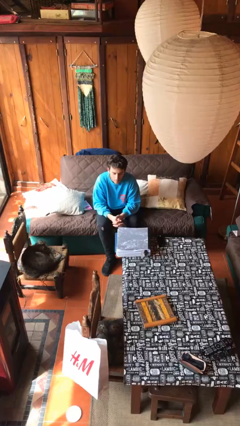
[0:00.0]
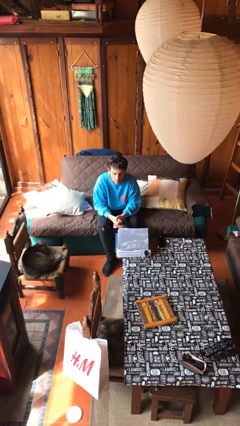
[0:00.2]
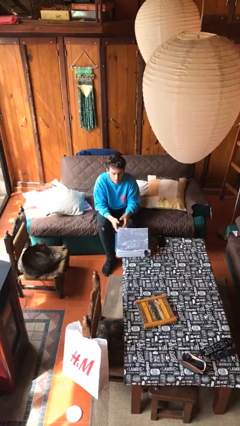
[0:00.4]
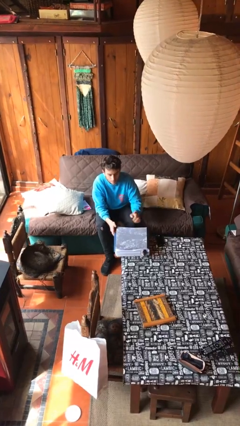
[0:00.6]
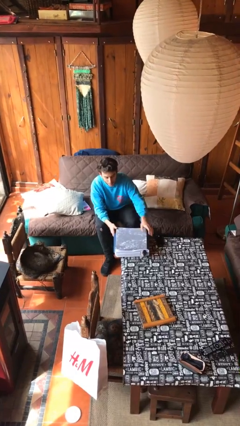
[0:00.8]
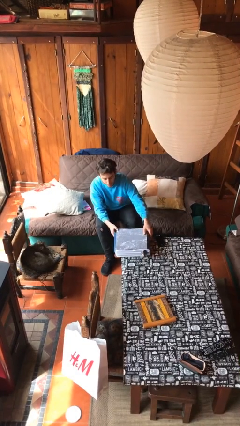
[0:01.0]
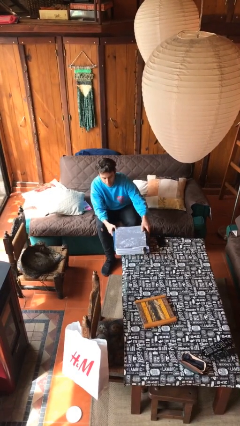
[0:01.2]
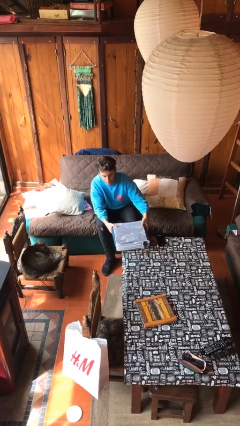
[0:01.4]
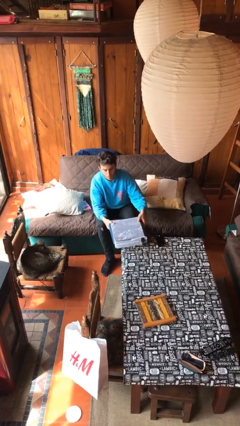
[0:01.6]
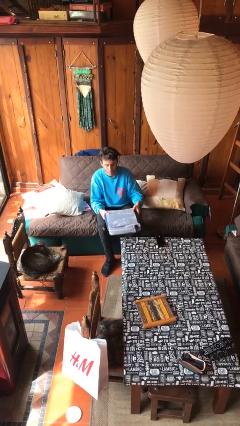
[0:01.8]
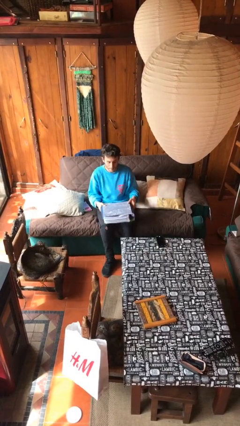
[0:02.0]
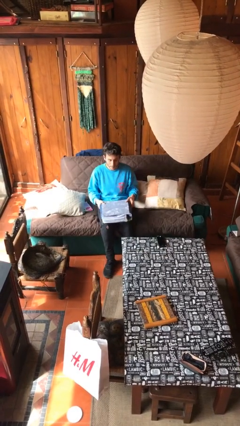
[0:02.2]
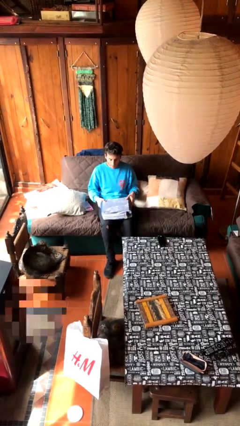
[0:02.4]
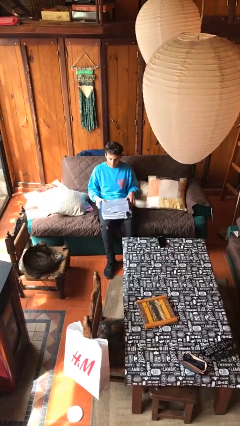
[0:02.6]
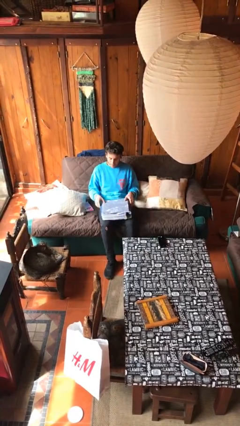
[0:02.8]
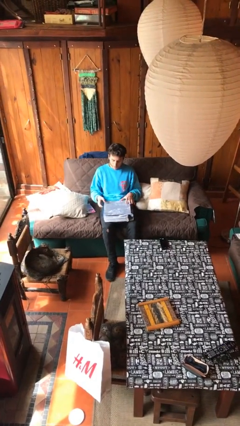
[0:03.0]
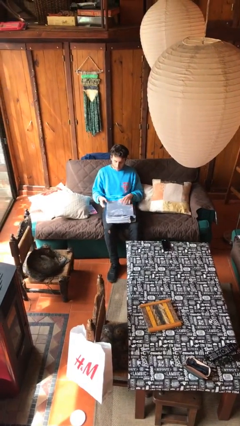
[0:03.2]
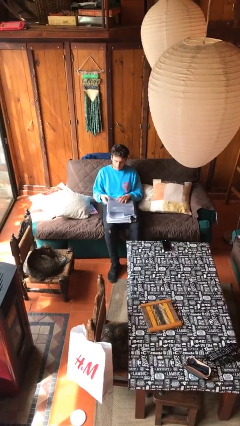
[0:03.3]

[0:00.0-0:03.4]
person picks up object from table

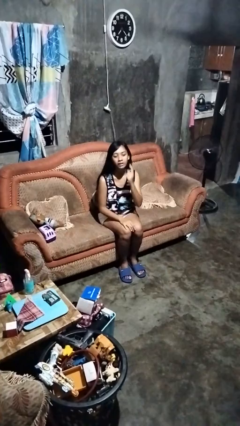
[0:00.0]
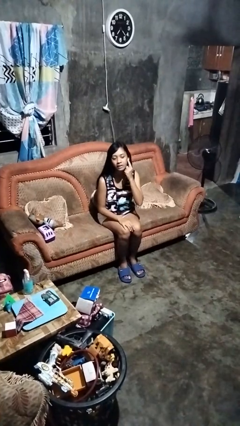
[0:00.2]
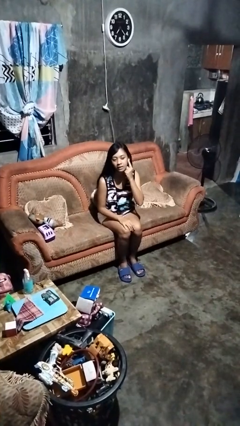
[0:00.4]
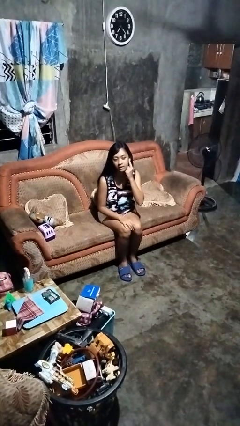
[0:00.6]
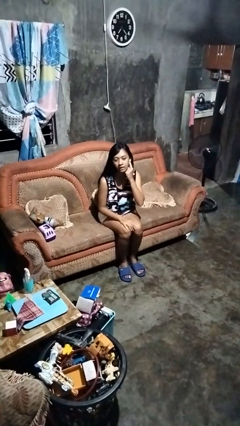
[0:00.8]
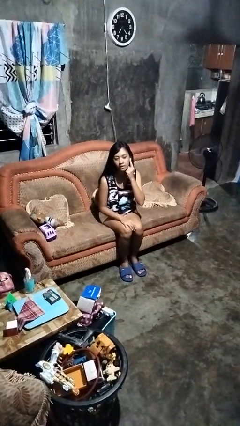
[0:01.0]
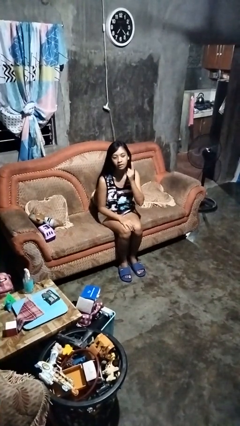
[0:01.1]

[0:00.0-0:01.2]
person gestures listen closely

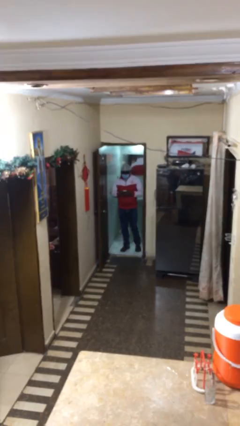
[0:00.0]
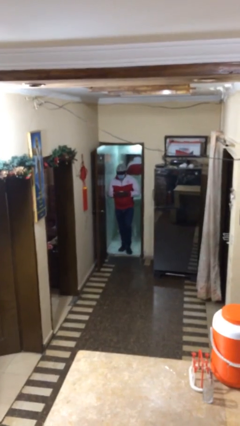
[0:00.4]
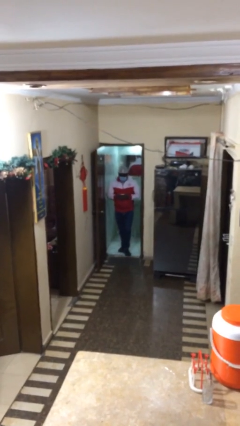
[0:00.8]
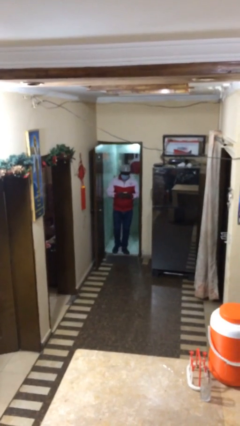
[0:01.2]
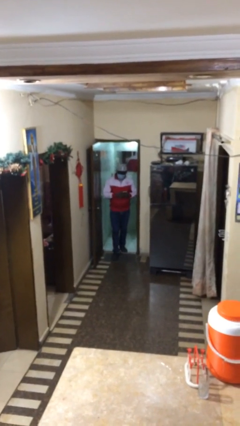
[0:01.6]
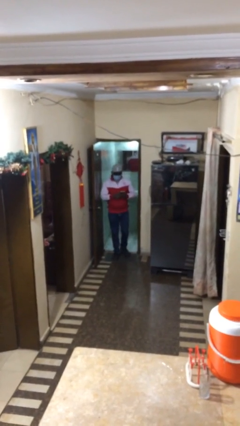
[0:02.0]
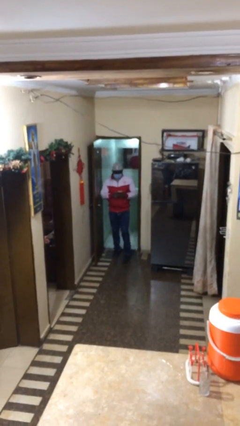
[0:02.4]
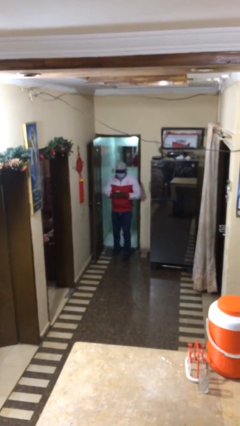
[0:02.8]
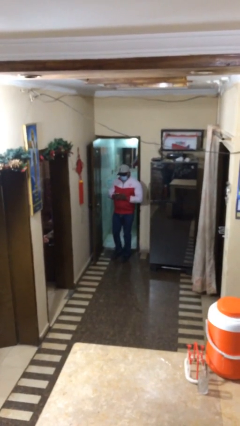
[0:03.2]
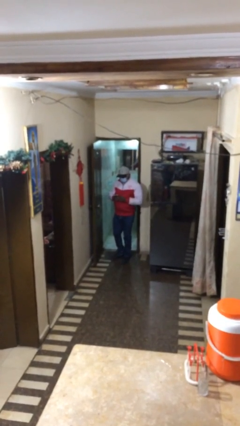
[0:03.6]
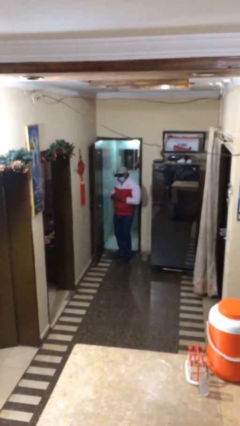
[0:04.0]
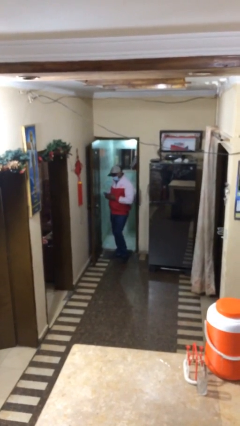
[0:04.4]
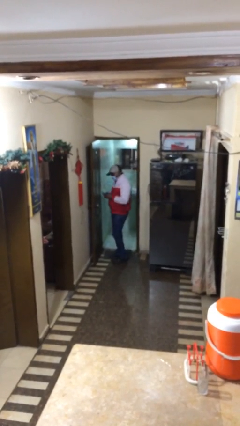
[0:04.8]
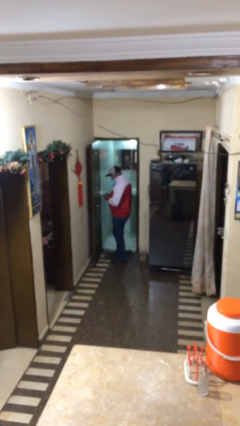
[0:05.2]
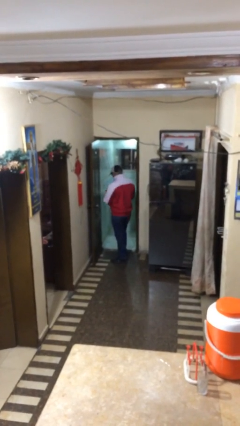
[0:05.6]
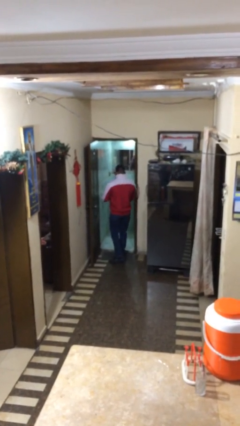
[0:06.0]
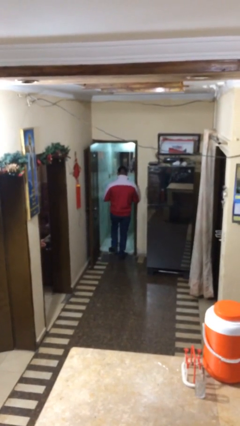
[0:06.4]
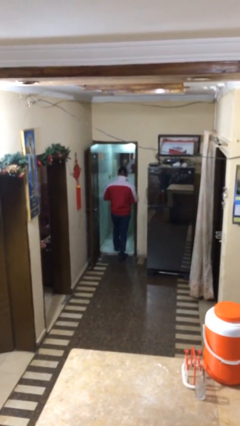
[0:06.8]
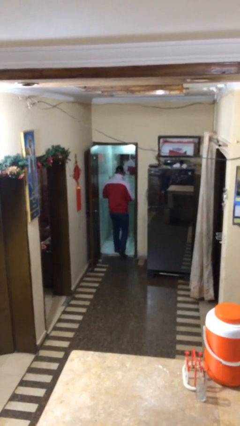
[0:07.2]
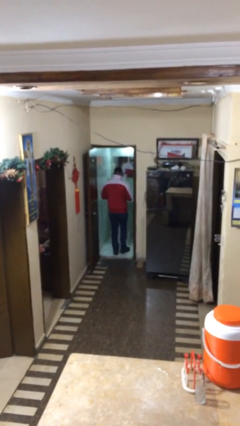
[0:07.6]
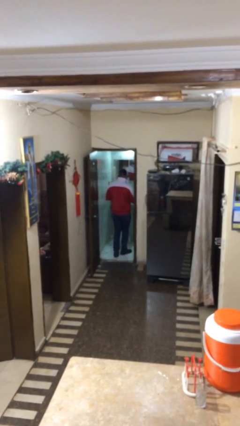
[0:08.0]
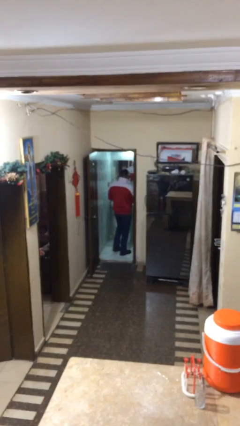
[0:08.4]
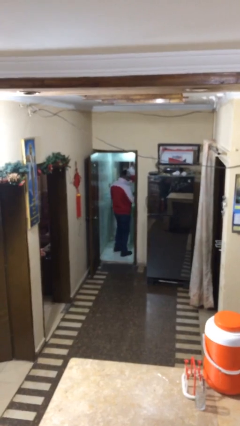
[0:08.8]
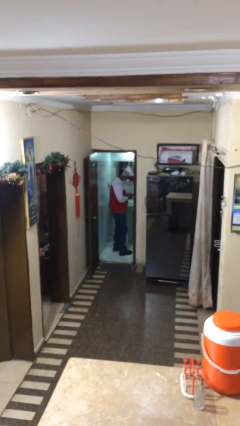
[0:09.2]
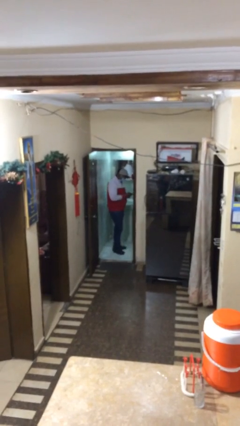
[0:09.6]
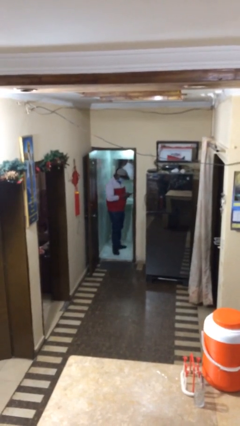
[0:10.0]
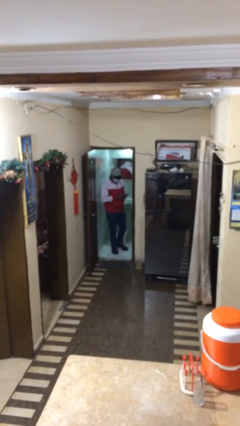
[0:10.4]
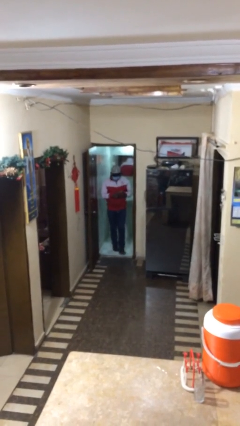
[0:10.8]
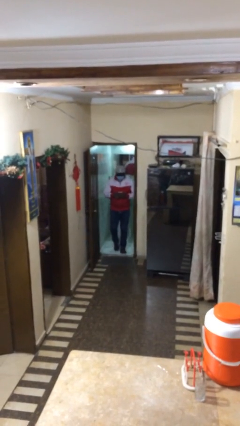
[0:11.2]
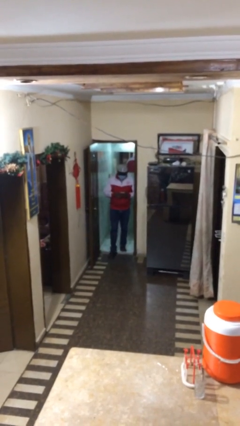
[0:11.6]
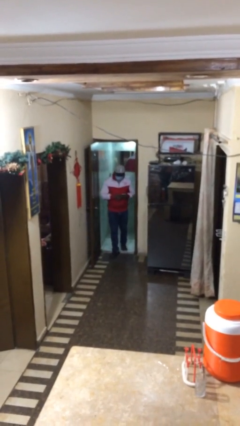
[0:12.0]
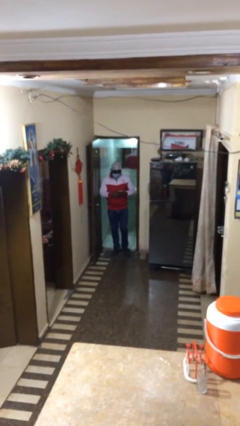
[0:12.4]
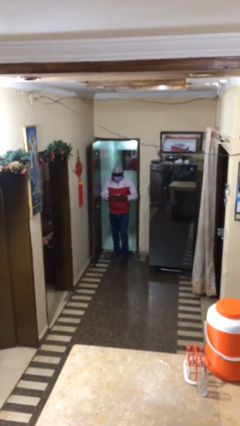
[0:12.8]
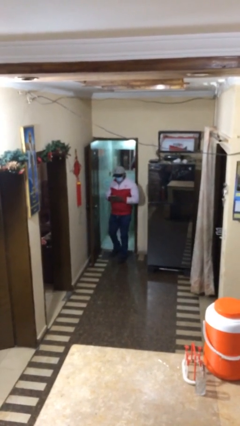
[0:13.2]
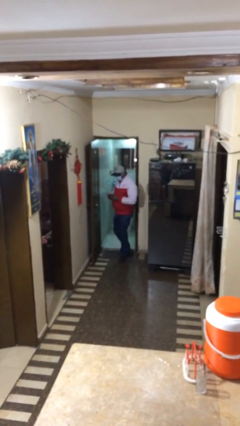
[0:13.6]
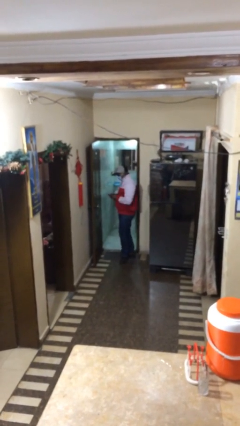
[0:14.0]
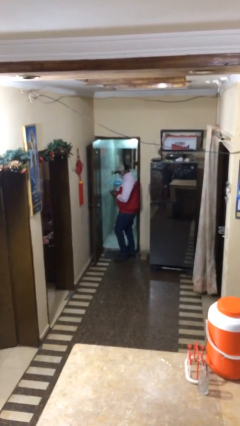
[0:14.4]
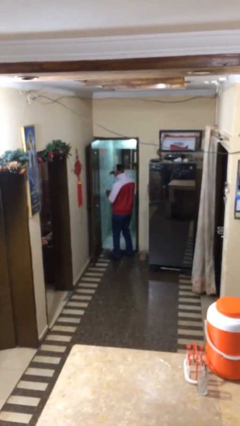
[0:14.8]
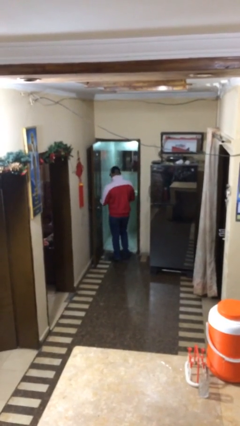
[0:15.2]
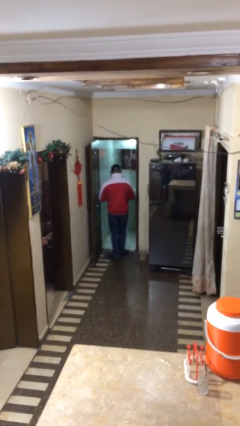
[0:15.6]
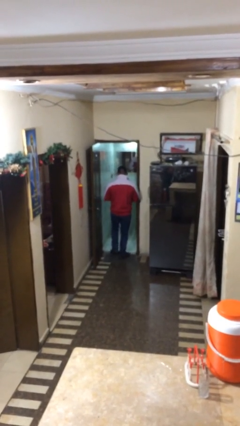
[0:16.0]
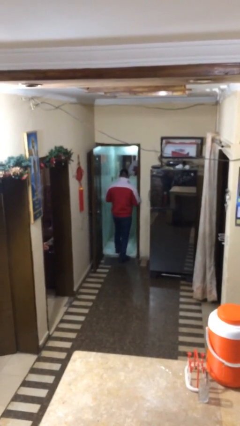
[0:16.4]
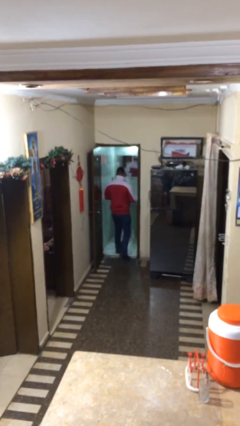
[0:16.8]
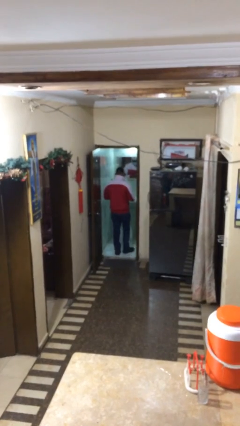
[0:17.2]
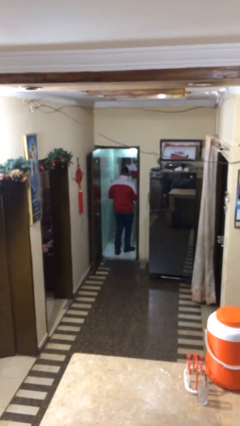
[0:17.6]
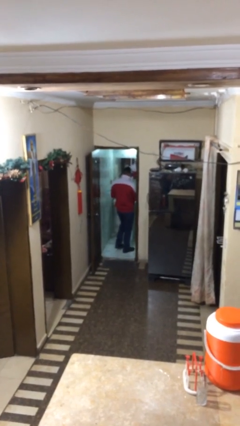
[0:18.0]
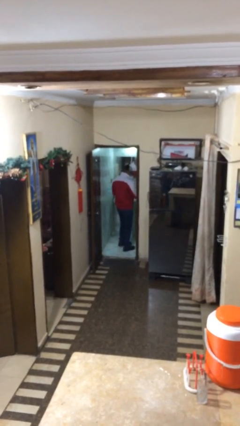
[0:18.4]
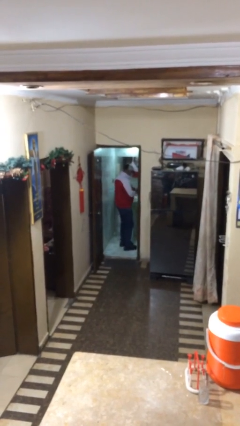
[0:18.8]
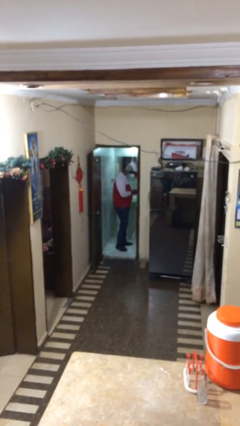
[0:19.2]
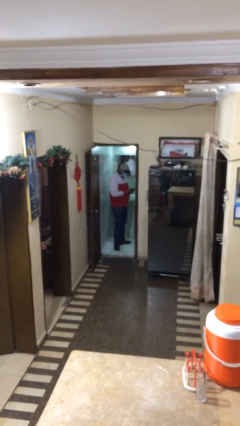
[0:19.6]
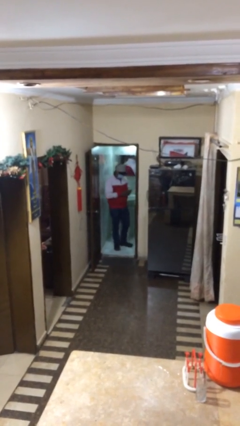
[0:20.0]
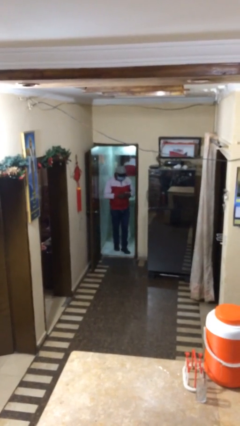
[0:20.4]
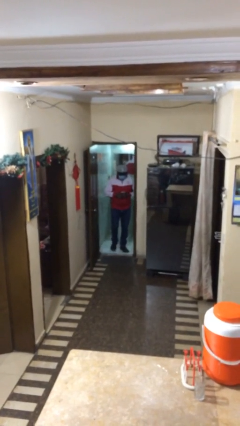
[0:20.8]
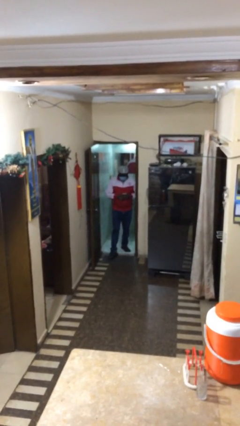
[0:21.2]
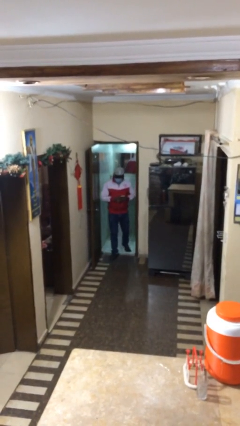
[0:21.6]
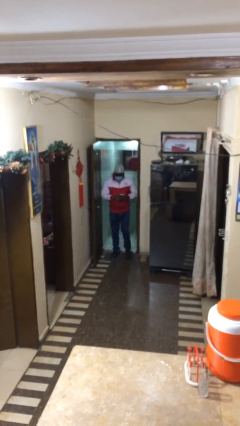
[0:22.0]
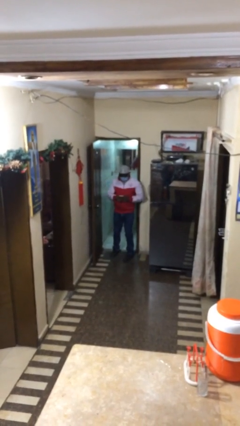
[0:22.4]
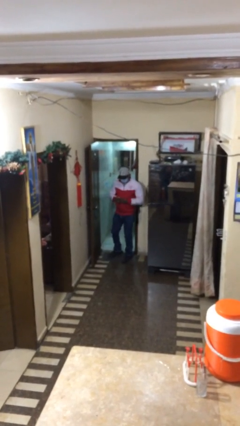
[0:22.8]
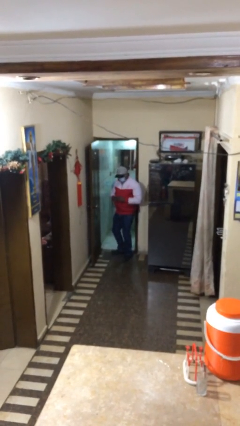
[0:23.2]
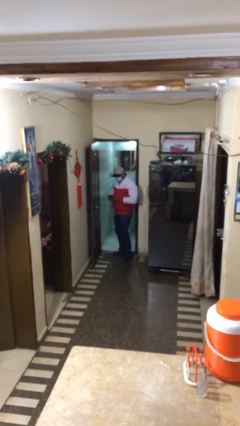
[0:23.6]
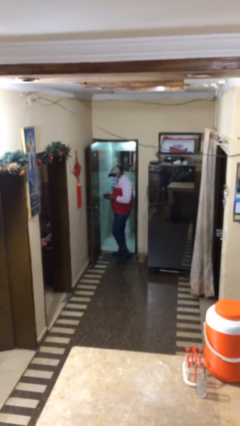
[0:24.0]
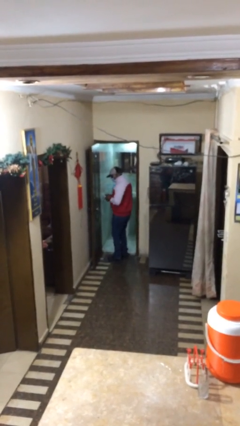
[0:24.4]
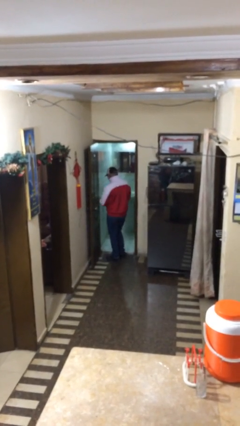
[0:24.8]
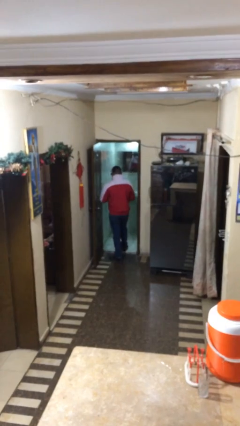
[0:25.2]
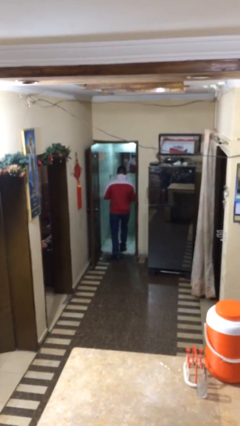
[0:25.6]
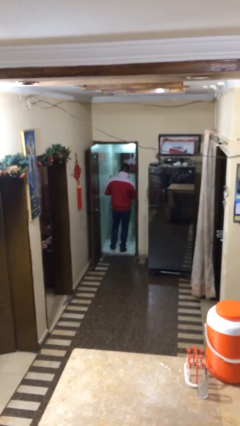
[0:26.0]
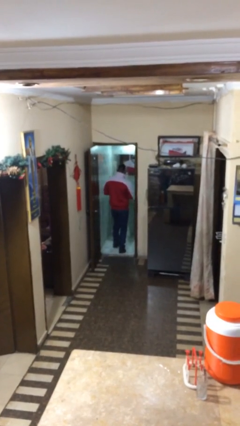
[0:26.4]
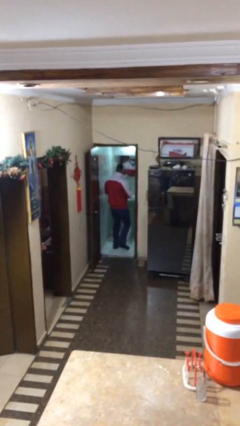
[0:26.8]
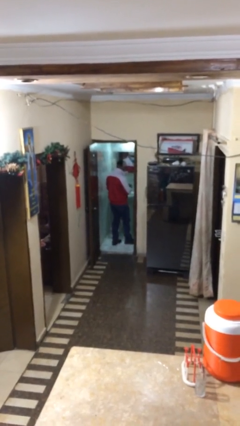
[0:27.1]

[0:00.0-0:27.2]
person texts on phone
